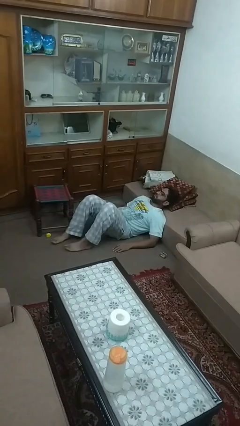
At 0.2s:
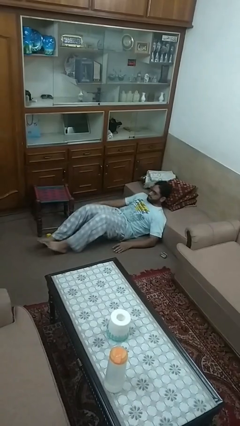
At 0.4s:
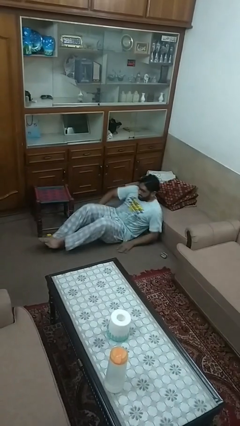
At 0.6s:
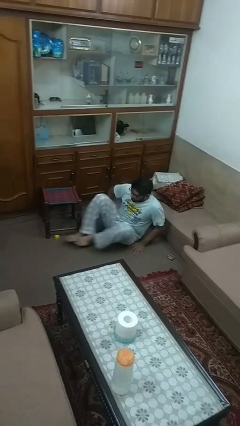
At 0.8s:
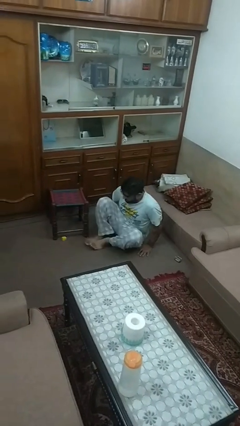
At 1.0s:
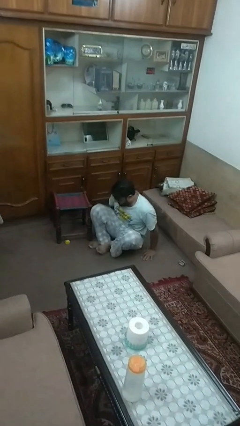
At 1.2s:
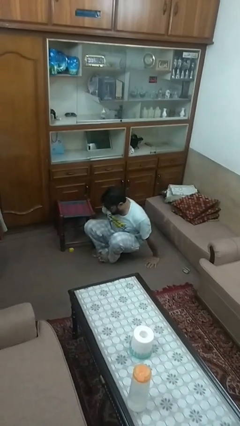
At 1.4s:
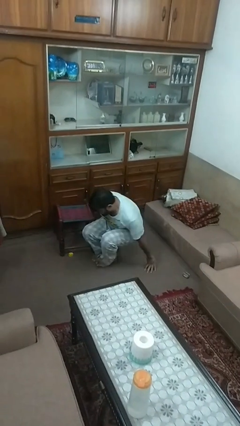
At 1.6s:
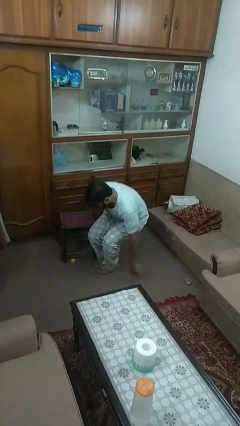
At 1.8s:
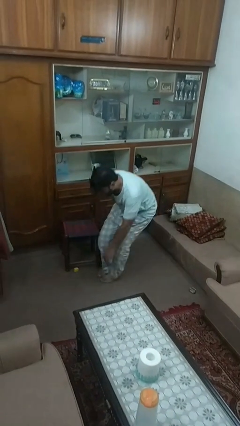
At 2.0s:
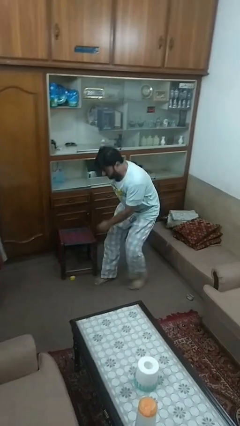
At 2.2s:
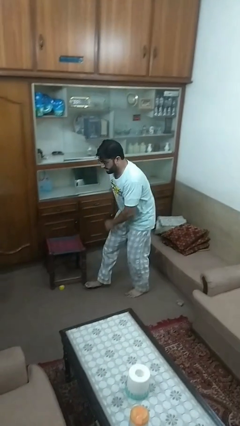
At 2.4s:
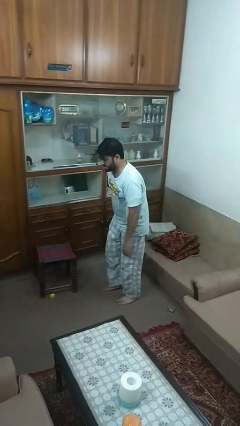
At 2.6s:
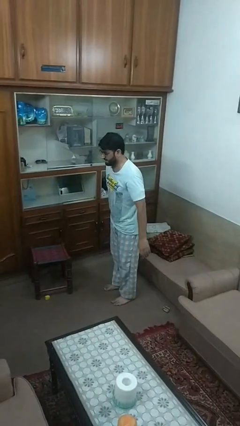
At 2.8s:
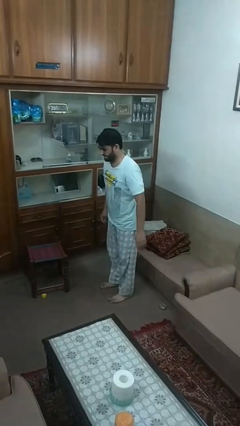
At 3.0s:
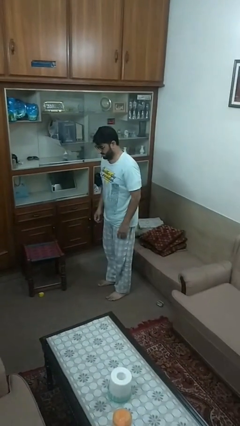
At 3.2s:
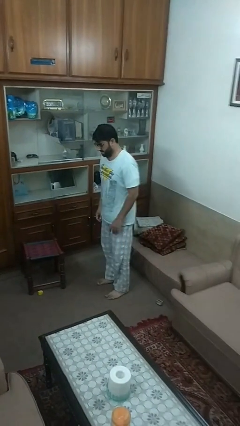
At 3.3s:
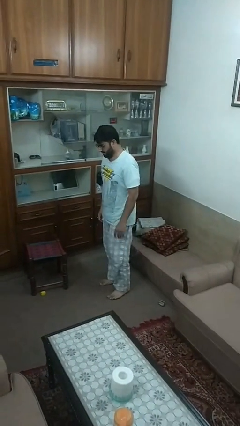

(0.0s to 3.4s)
person stands up from floor

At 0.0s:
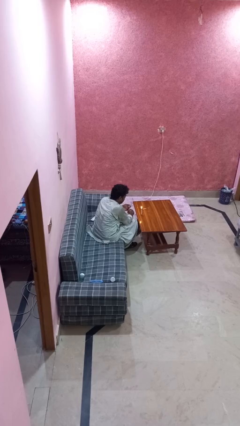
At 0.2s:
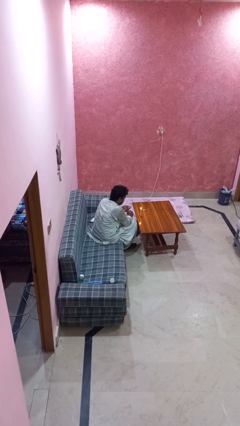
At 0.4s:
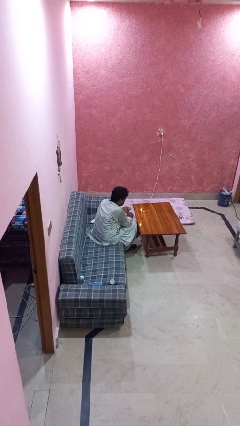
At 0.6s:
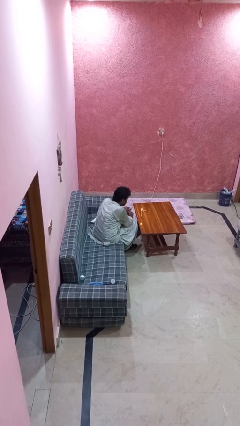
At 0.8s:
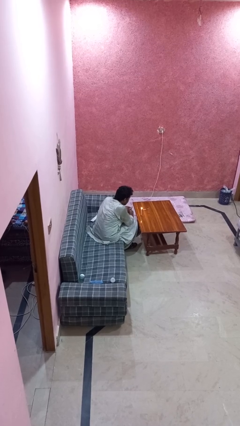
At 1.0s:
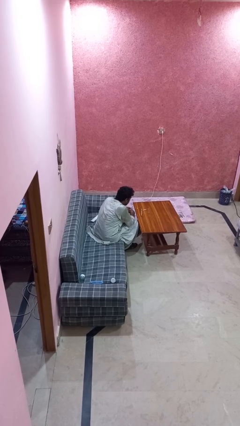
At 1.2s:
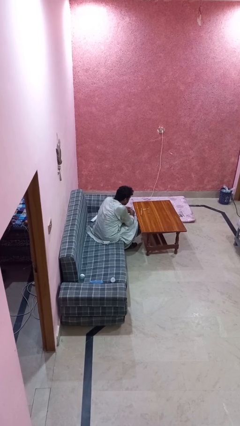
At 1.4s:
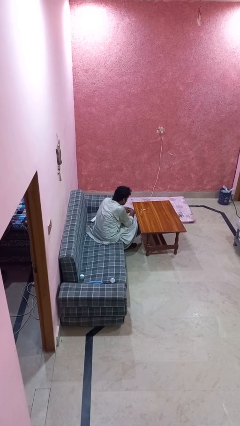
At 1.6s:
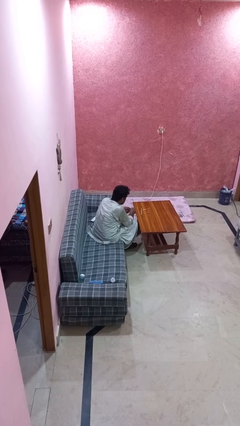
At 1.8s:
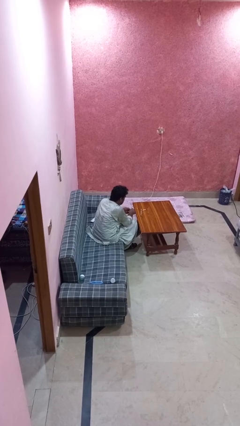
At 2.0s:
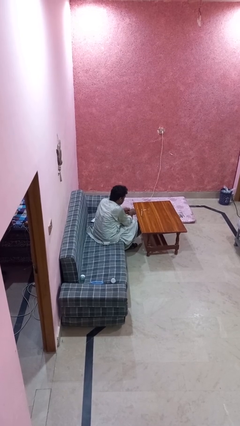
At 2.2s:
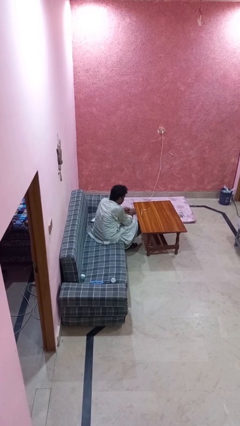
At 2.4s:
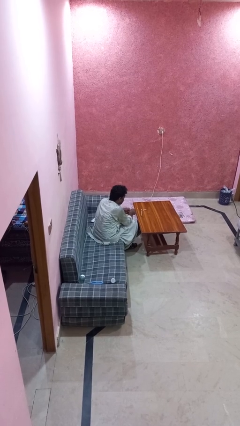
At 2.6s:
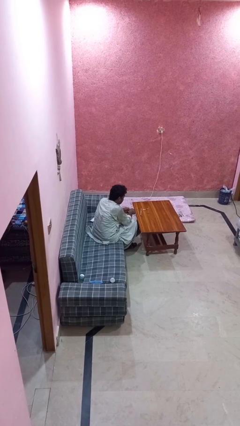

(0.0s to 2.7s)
person extinguishes candle

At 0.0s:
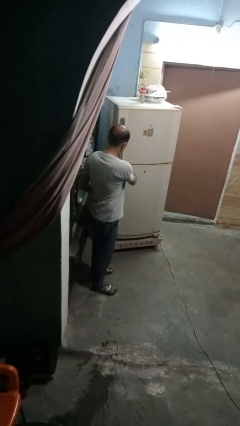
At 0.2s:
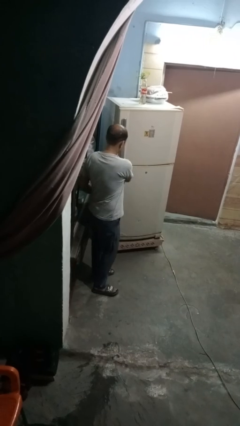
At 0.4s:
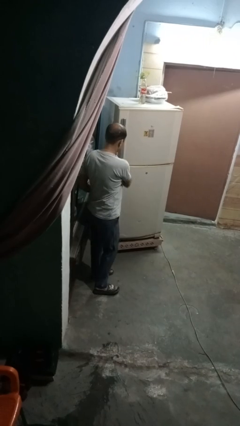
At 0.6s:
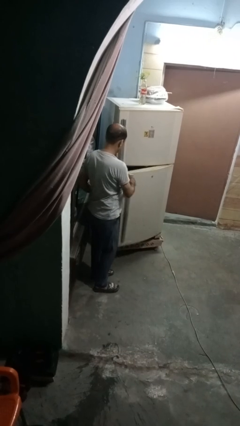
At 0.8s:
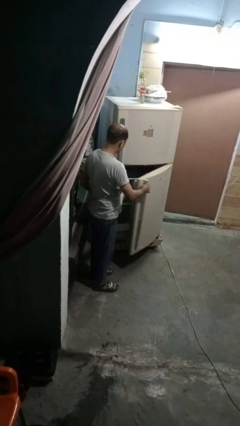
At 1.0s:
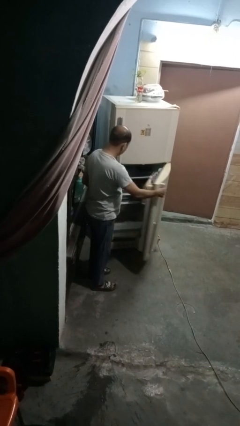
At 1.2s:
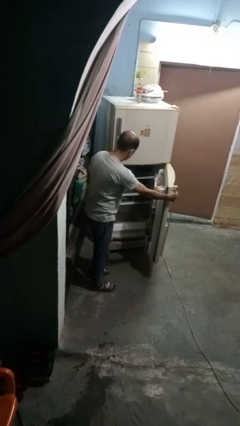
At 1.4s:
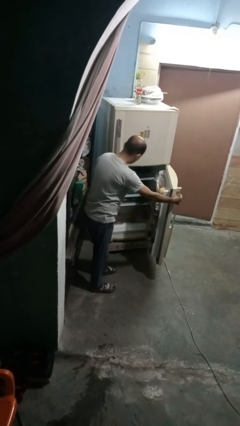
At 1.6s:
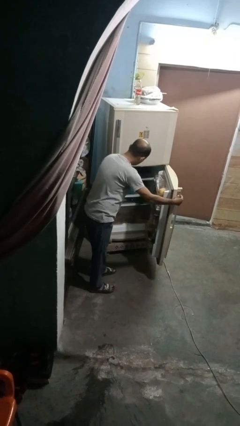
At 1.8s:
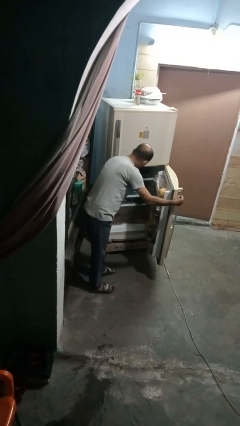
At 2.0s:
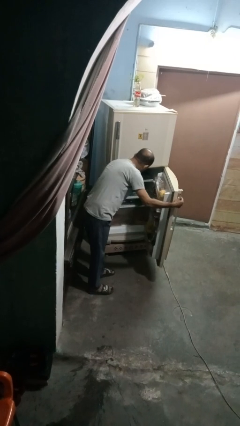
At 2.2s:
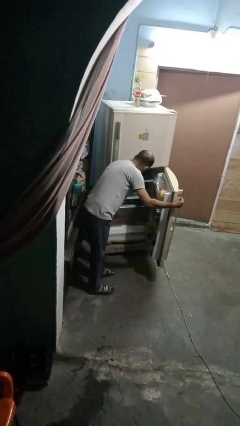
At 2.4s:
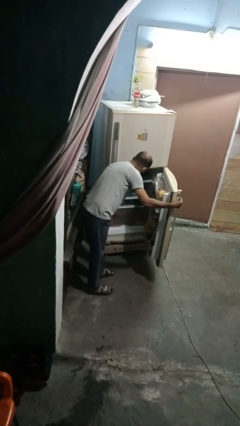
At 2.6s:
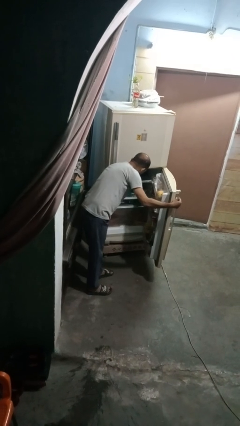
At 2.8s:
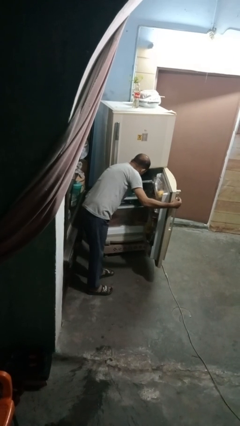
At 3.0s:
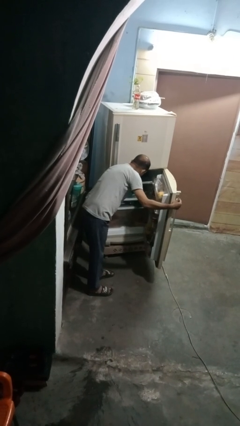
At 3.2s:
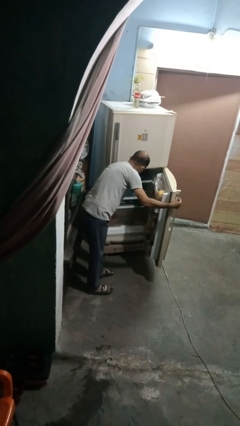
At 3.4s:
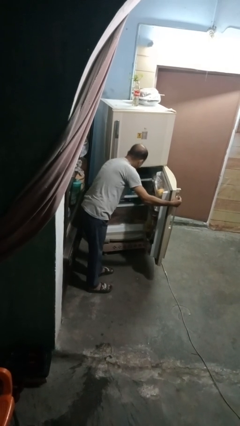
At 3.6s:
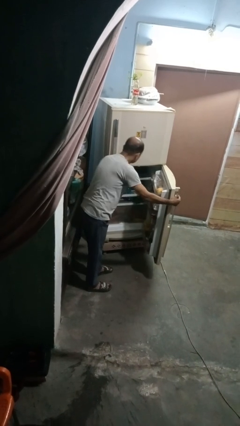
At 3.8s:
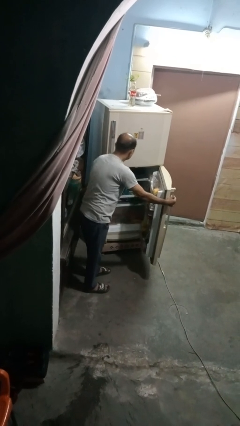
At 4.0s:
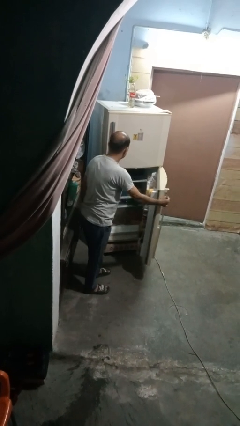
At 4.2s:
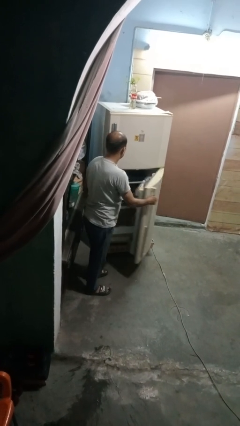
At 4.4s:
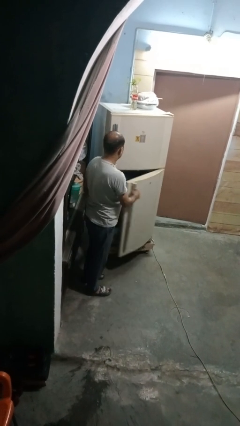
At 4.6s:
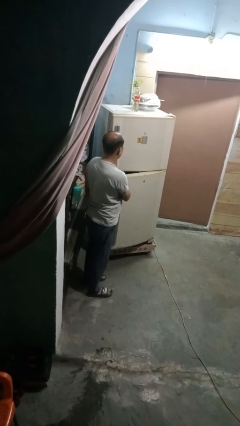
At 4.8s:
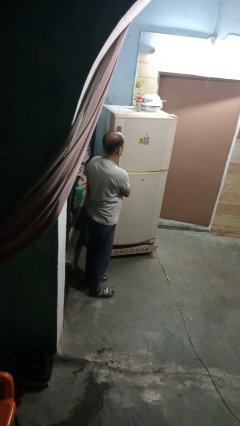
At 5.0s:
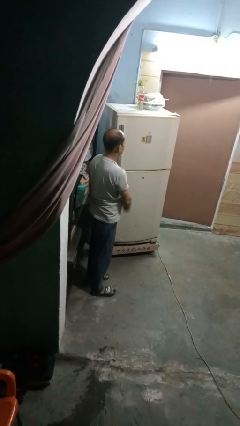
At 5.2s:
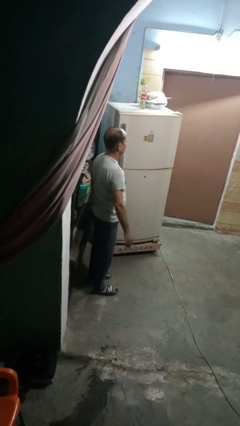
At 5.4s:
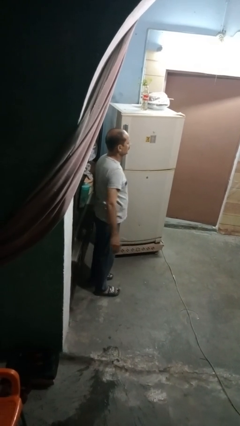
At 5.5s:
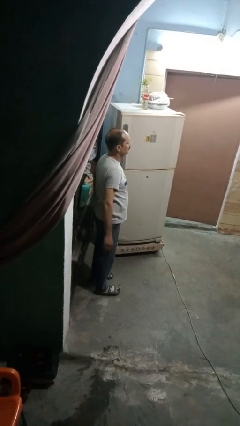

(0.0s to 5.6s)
person puts object into refrigerator

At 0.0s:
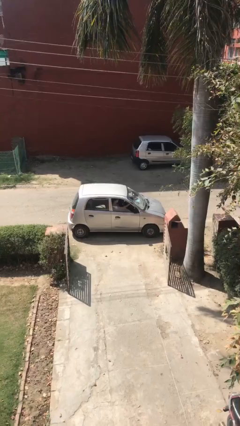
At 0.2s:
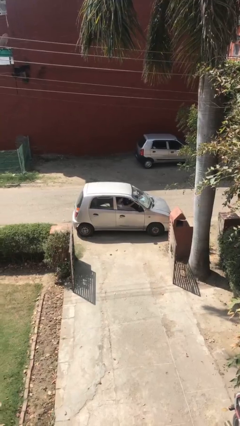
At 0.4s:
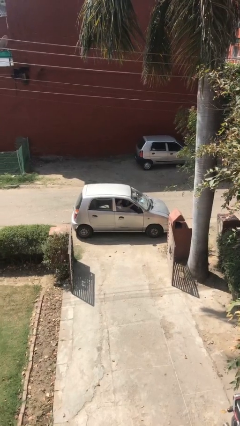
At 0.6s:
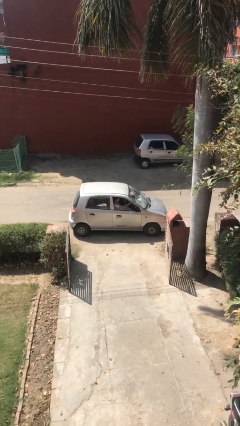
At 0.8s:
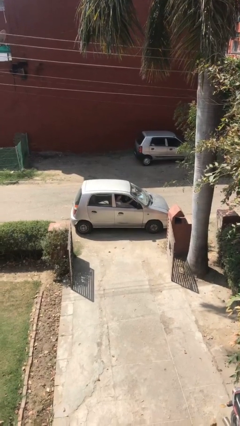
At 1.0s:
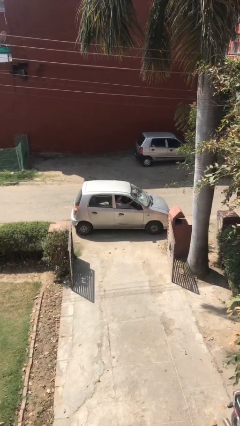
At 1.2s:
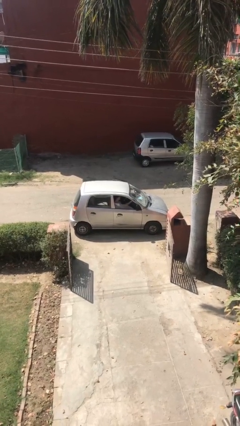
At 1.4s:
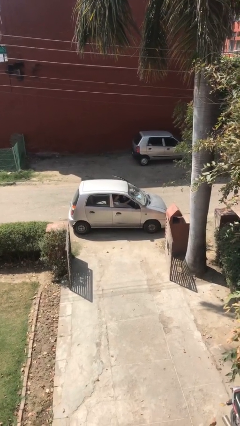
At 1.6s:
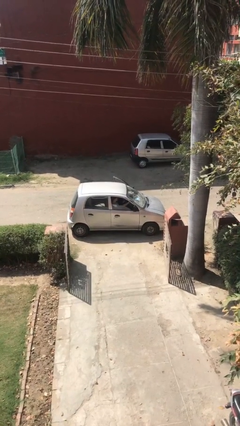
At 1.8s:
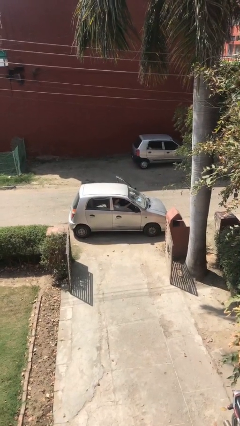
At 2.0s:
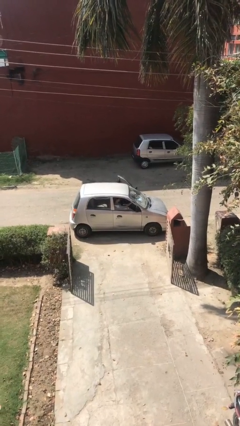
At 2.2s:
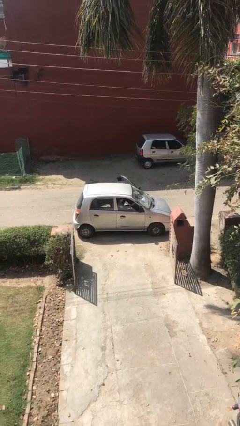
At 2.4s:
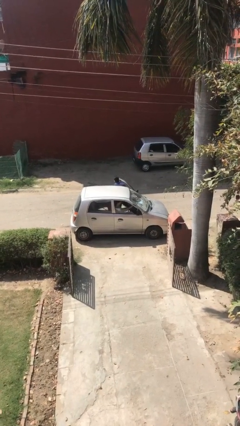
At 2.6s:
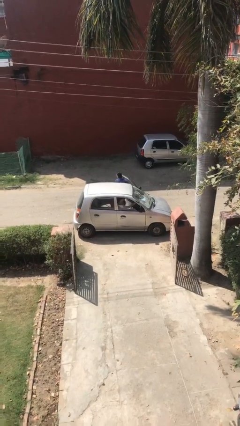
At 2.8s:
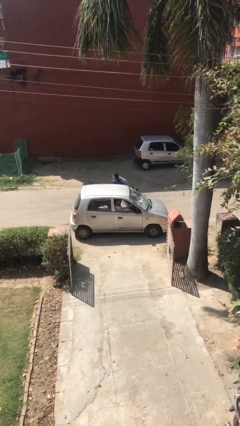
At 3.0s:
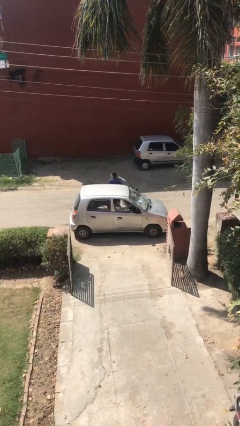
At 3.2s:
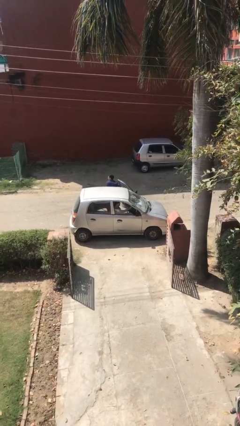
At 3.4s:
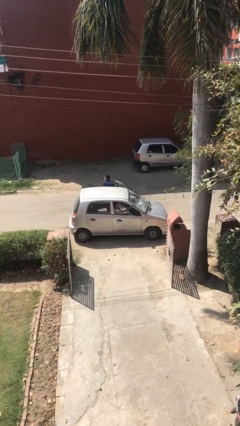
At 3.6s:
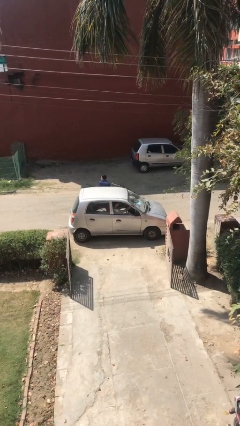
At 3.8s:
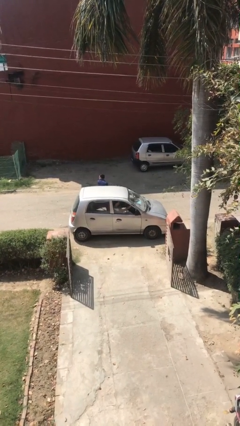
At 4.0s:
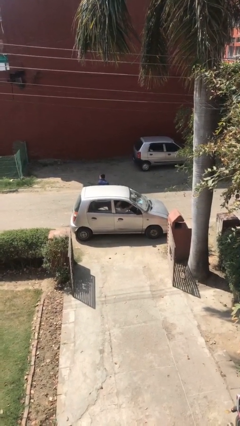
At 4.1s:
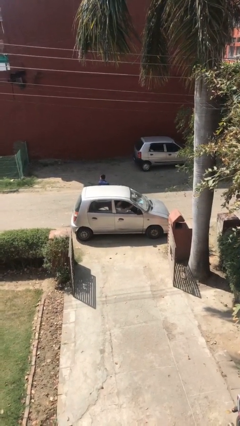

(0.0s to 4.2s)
car drops off person

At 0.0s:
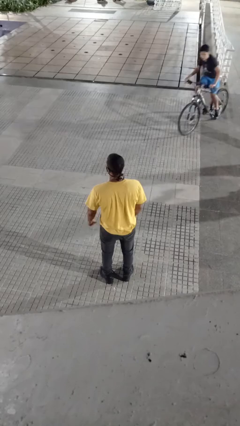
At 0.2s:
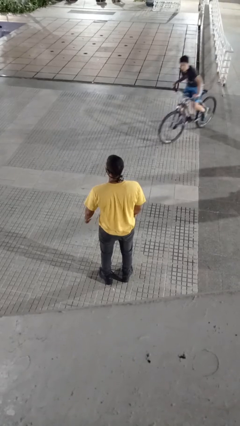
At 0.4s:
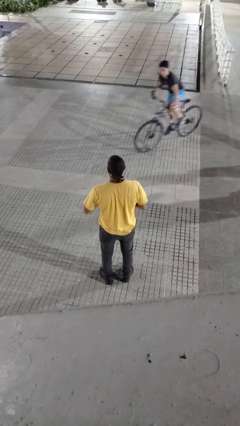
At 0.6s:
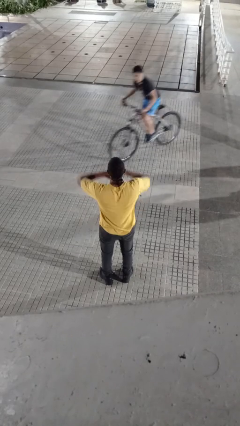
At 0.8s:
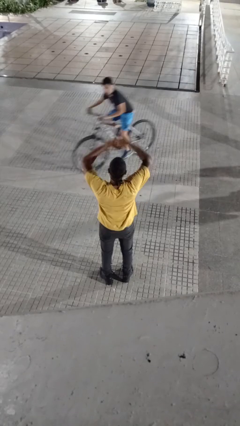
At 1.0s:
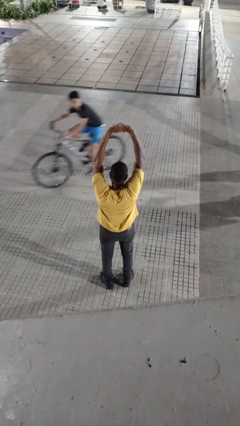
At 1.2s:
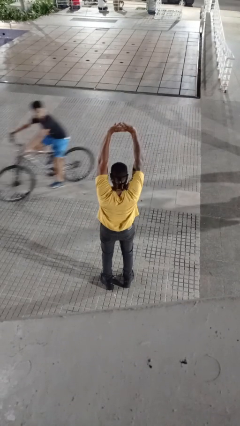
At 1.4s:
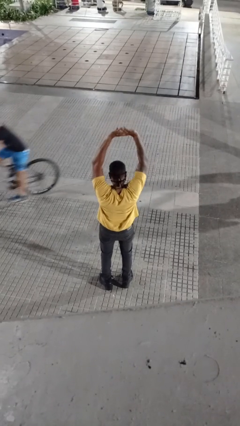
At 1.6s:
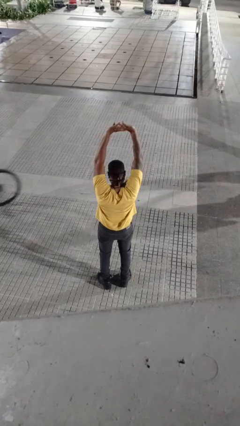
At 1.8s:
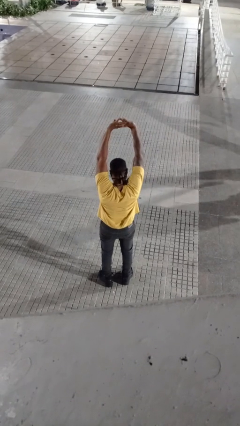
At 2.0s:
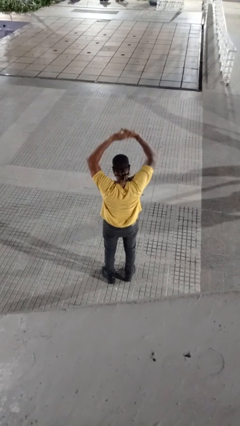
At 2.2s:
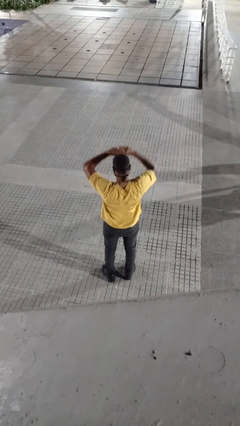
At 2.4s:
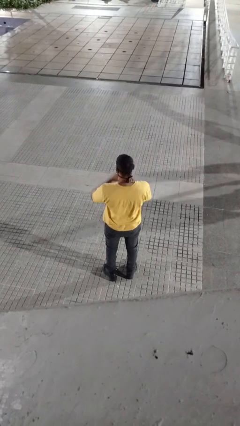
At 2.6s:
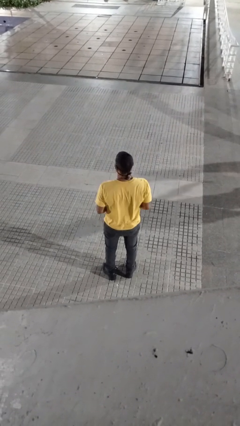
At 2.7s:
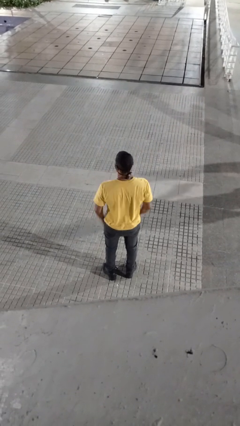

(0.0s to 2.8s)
person stretches arms over head
